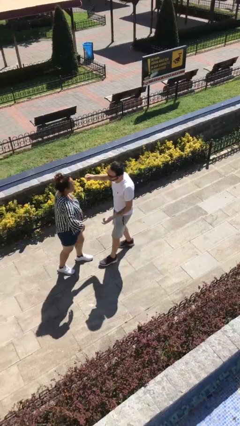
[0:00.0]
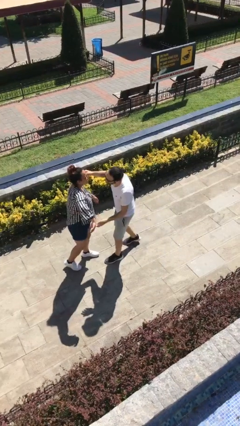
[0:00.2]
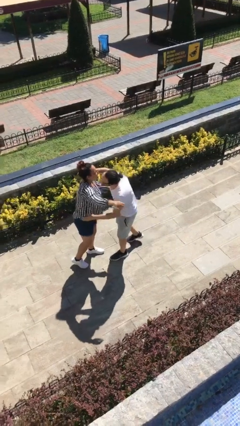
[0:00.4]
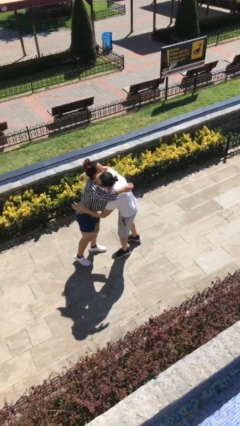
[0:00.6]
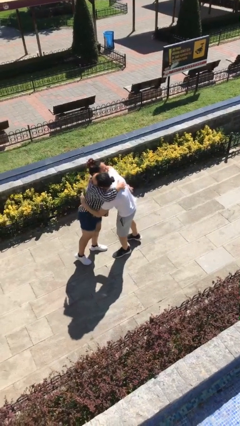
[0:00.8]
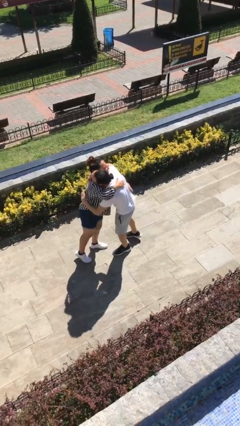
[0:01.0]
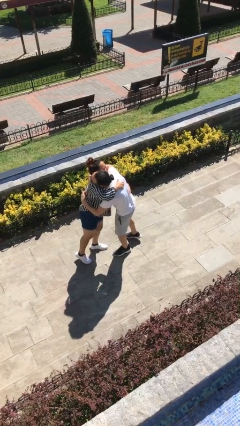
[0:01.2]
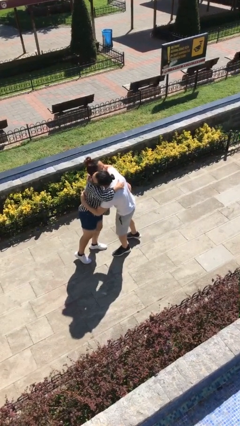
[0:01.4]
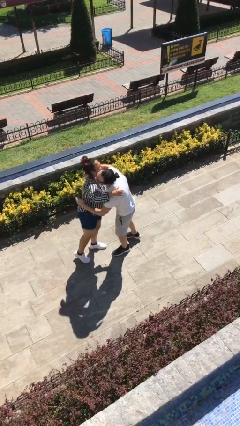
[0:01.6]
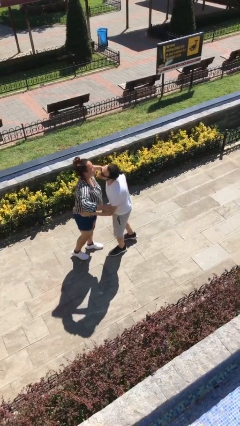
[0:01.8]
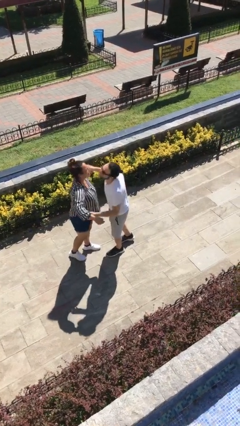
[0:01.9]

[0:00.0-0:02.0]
person embraces person

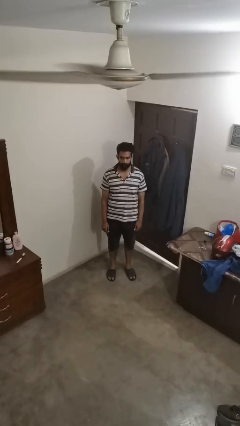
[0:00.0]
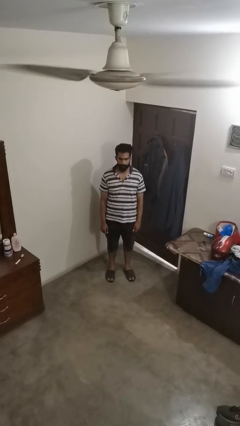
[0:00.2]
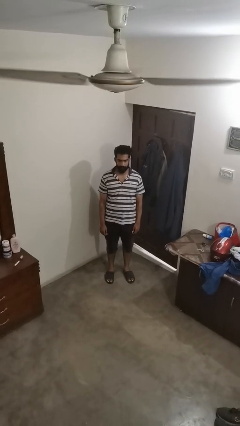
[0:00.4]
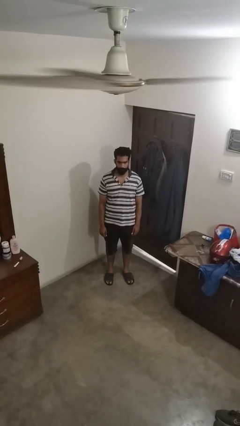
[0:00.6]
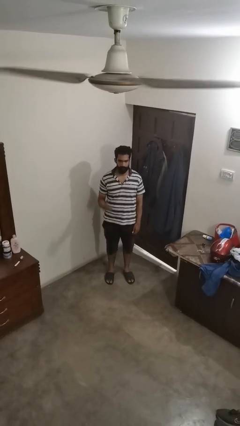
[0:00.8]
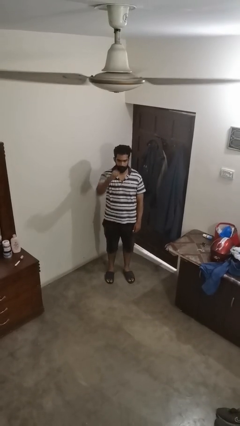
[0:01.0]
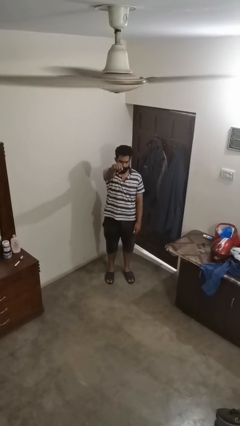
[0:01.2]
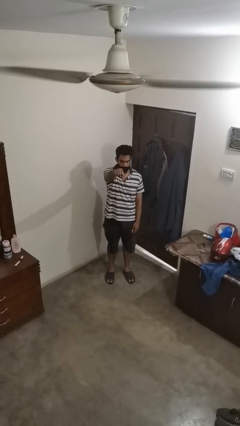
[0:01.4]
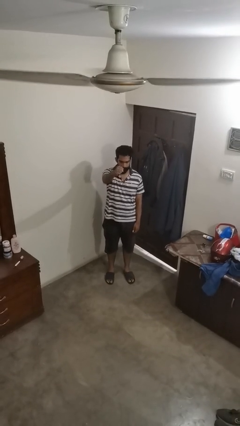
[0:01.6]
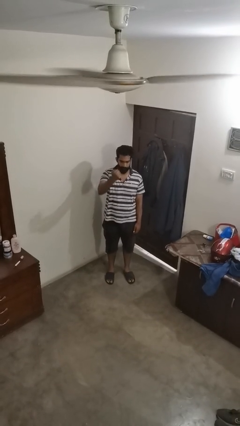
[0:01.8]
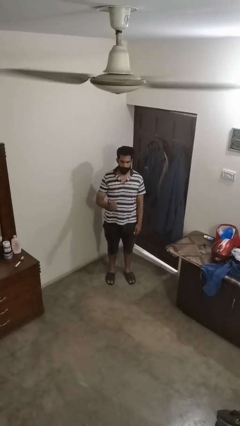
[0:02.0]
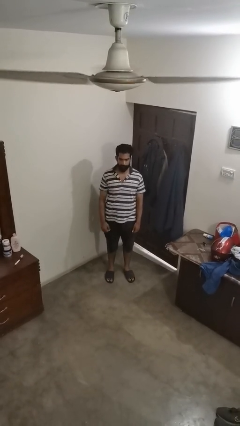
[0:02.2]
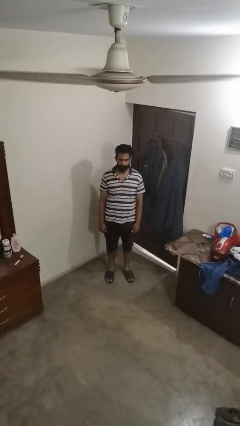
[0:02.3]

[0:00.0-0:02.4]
person punches

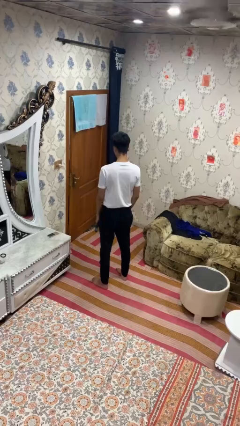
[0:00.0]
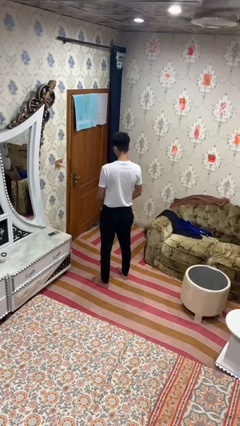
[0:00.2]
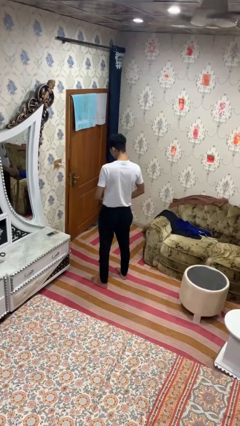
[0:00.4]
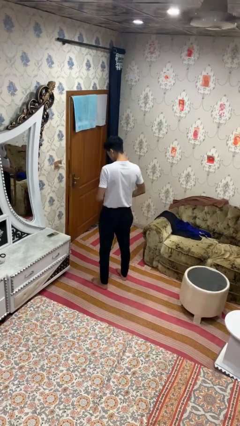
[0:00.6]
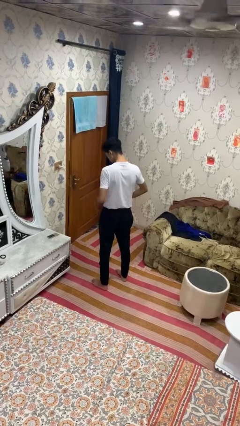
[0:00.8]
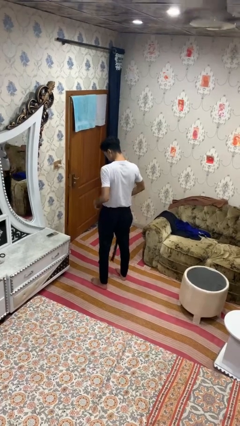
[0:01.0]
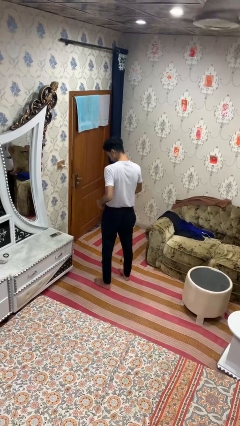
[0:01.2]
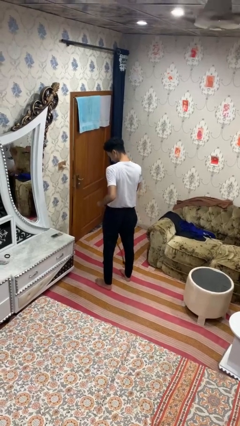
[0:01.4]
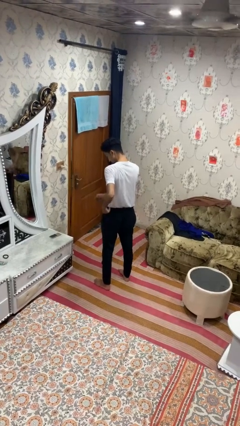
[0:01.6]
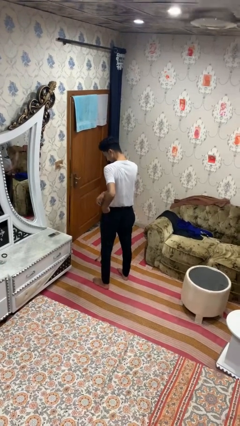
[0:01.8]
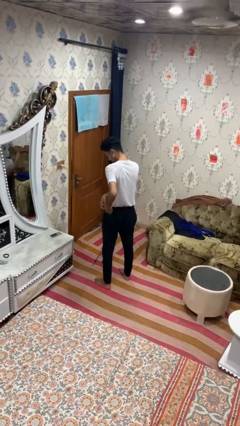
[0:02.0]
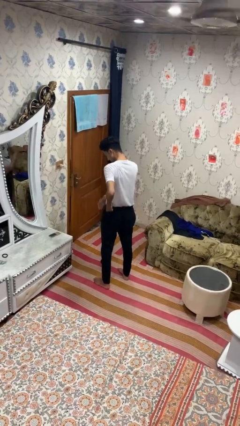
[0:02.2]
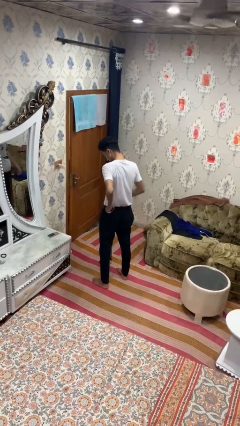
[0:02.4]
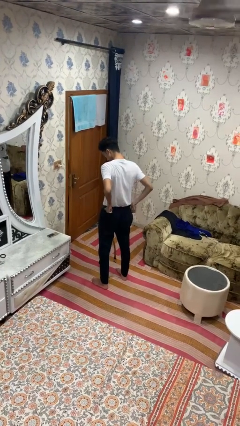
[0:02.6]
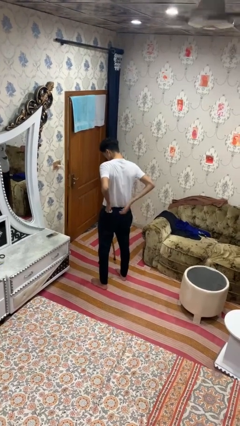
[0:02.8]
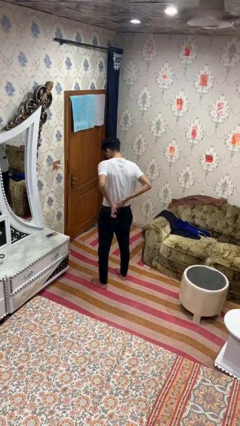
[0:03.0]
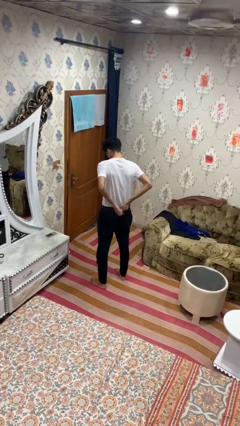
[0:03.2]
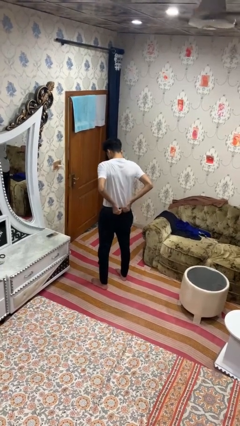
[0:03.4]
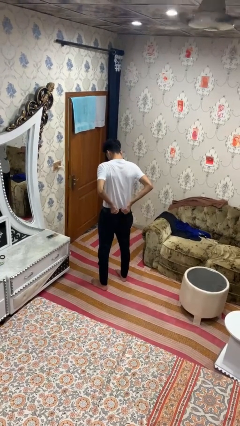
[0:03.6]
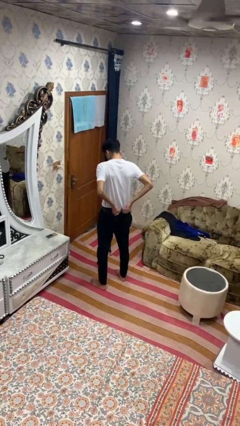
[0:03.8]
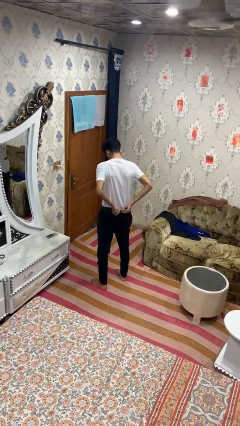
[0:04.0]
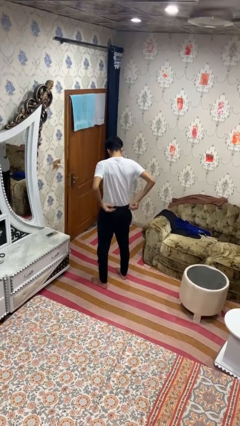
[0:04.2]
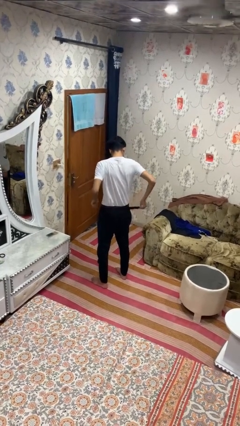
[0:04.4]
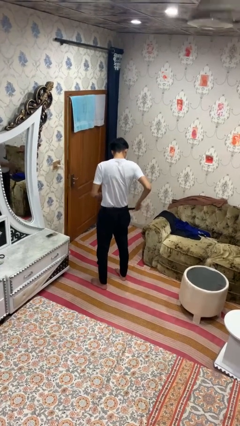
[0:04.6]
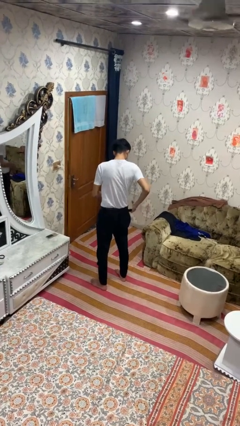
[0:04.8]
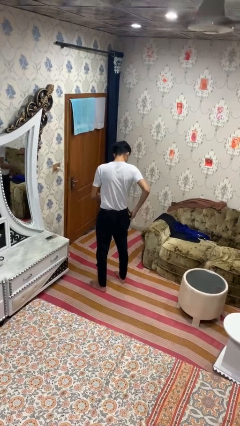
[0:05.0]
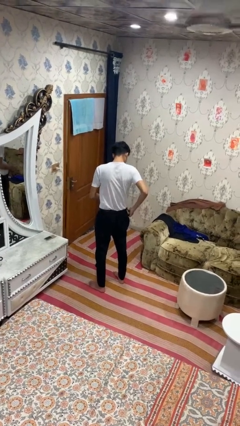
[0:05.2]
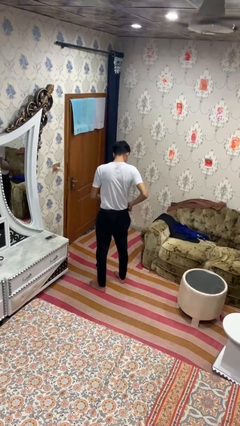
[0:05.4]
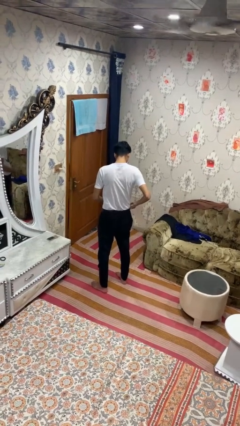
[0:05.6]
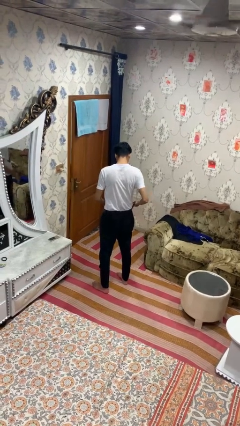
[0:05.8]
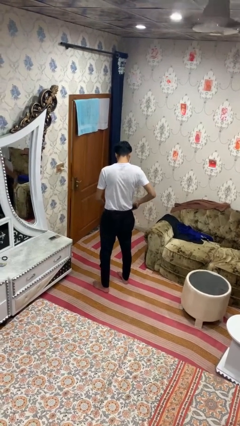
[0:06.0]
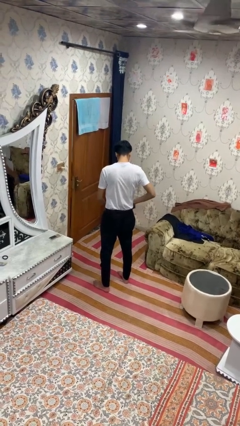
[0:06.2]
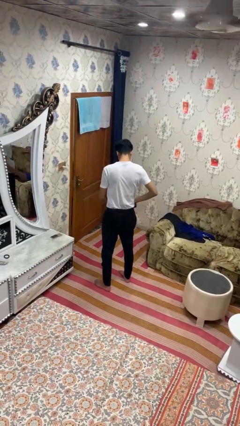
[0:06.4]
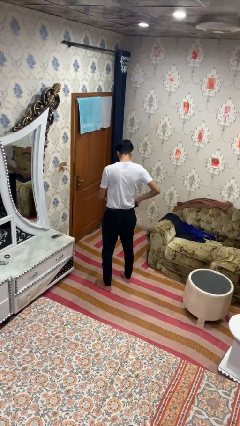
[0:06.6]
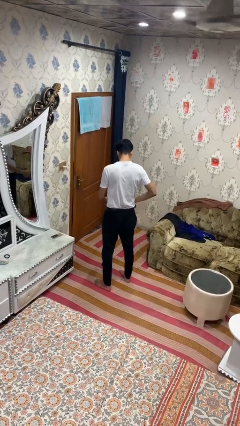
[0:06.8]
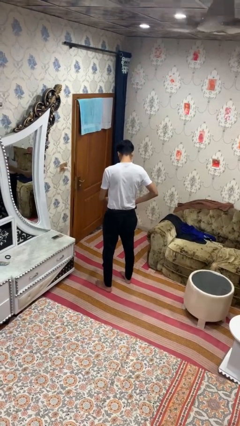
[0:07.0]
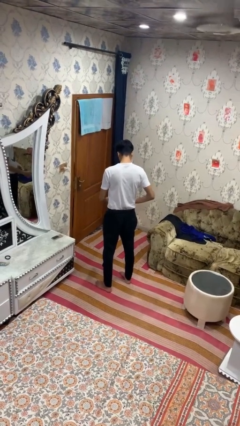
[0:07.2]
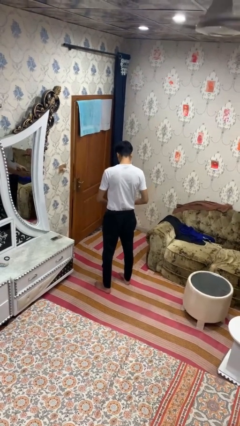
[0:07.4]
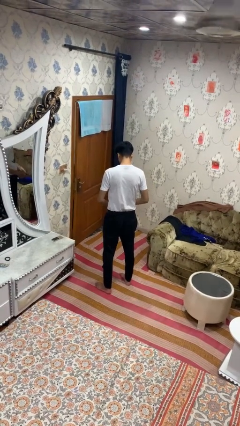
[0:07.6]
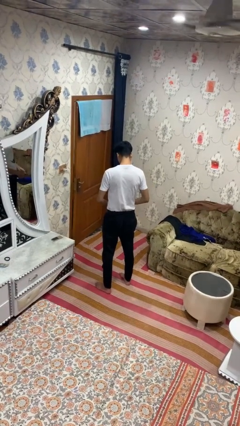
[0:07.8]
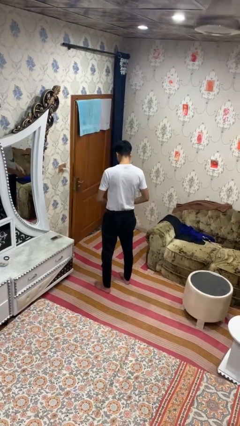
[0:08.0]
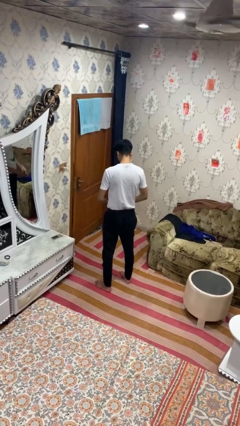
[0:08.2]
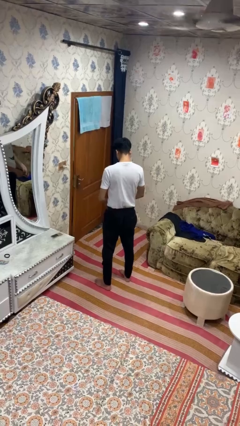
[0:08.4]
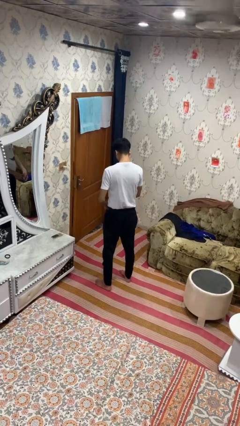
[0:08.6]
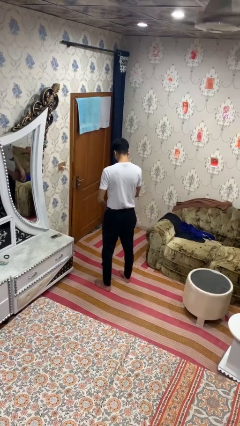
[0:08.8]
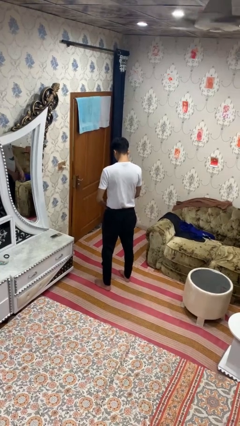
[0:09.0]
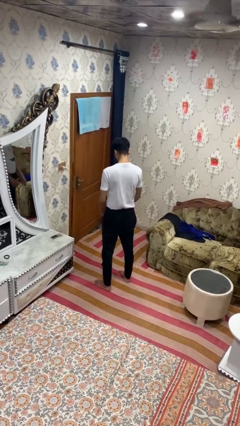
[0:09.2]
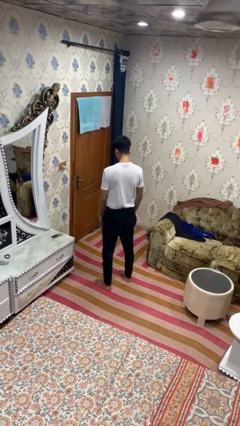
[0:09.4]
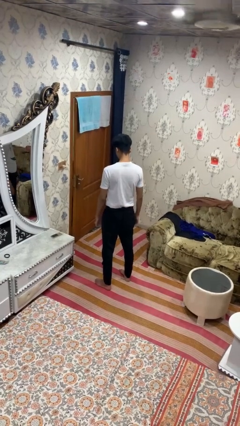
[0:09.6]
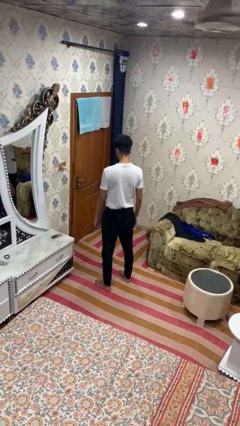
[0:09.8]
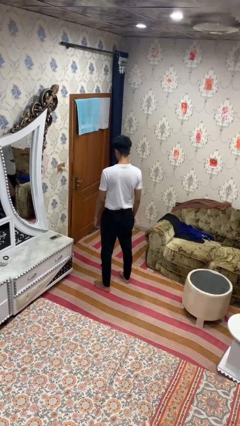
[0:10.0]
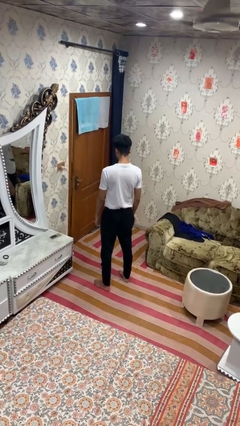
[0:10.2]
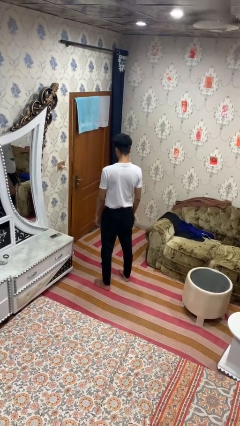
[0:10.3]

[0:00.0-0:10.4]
person puts on belt

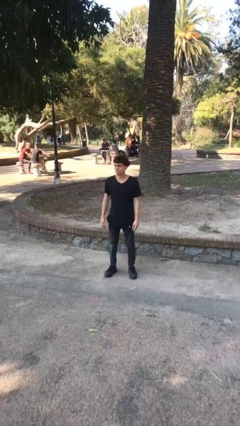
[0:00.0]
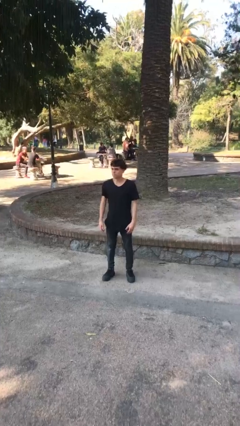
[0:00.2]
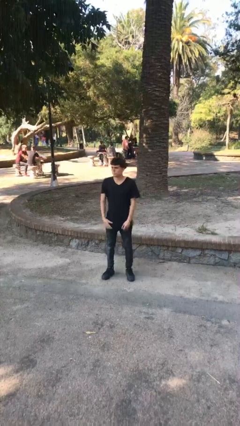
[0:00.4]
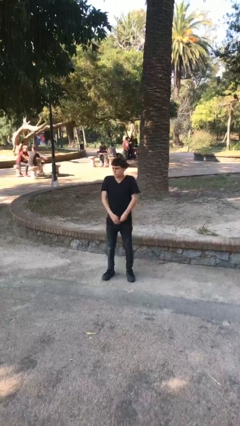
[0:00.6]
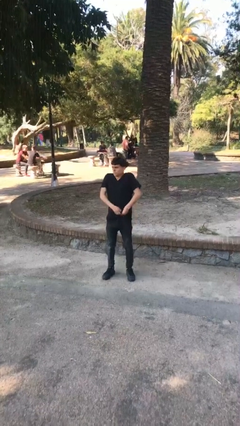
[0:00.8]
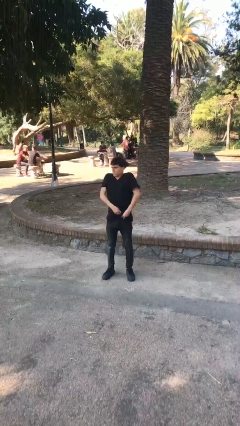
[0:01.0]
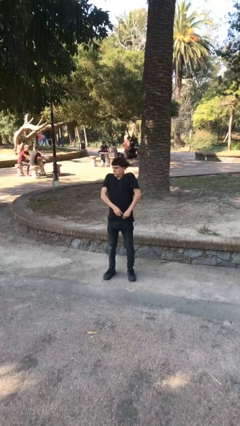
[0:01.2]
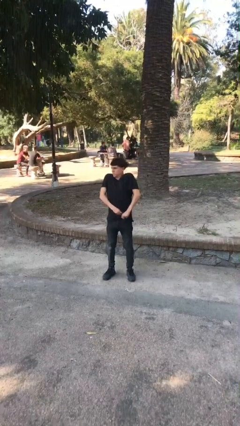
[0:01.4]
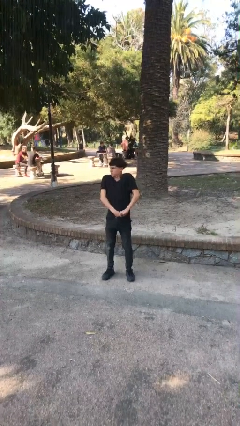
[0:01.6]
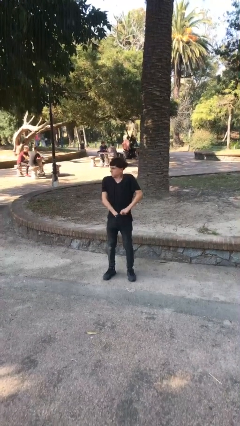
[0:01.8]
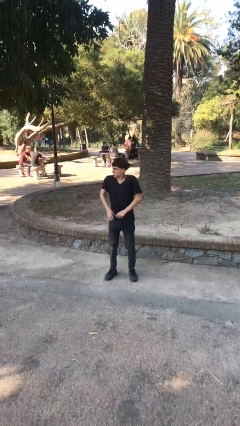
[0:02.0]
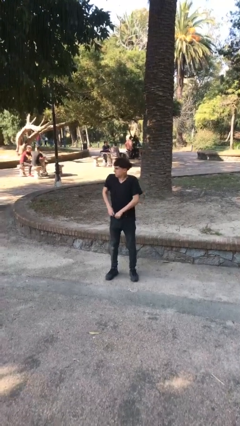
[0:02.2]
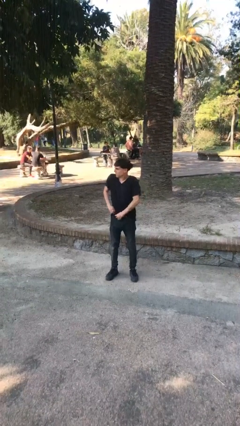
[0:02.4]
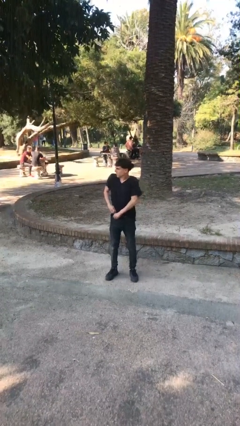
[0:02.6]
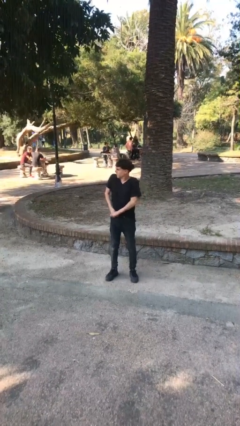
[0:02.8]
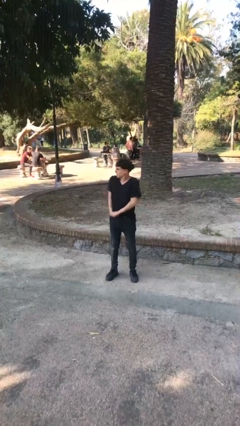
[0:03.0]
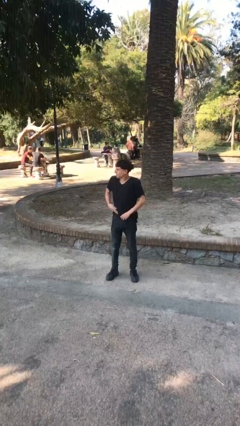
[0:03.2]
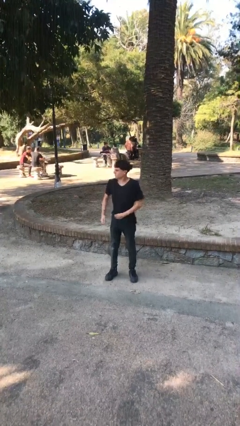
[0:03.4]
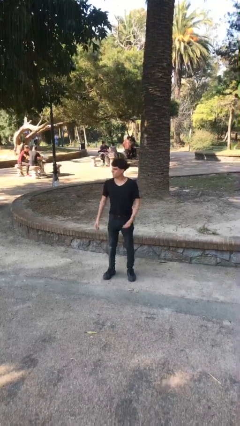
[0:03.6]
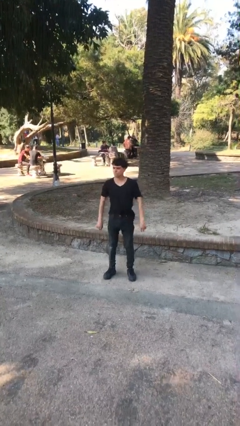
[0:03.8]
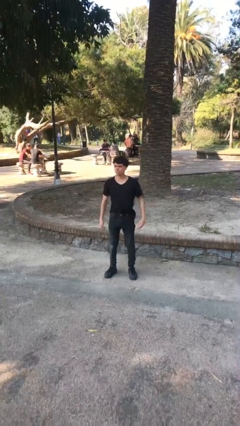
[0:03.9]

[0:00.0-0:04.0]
person tucks in shirt
